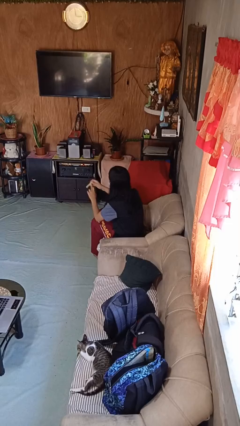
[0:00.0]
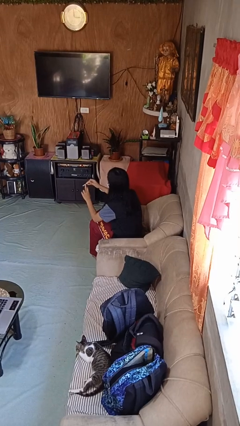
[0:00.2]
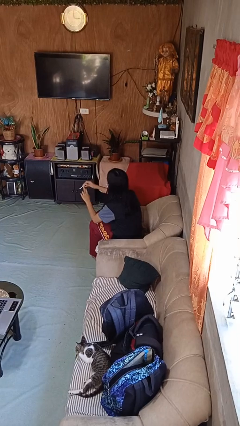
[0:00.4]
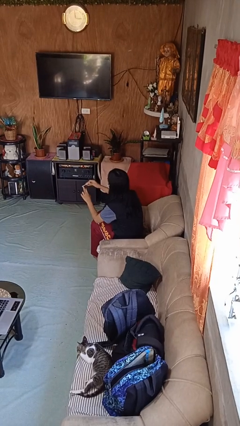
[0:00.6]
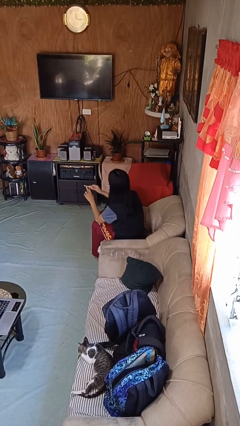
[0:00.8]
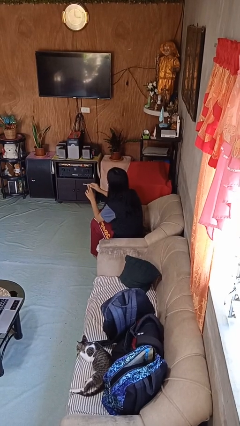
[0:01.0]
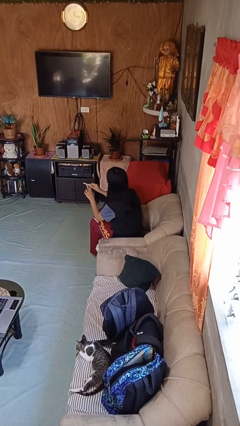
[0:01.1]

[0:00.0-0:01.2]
person files fingernails

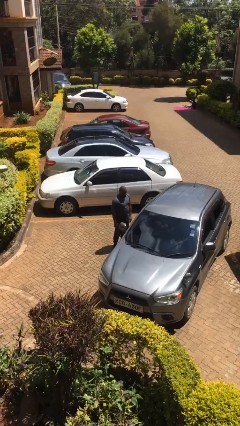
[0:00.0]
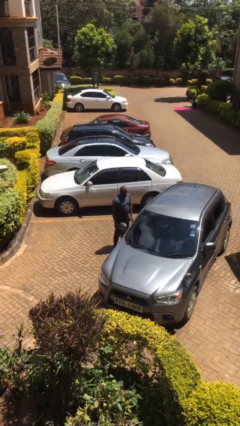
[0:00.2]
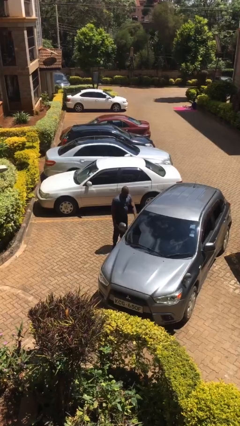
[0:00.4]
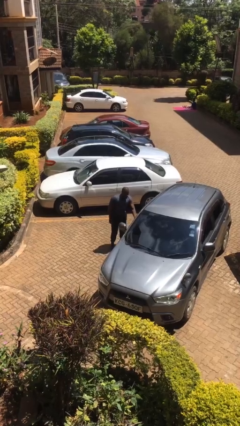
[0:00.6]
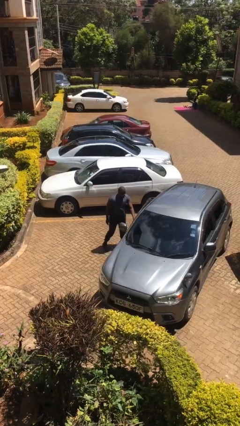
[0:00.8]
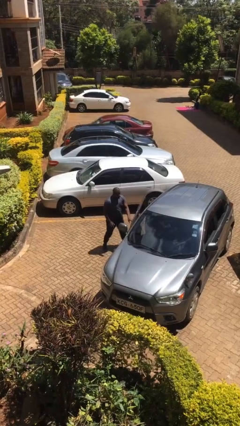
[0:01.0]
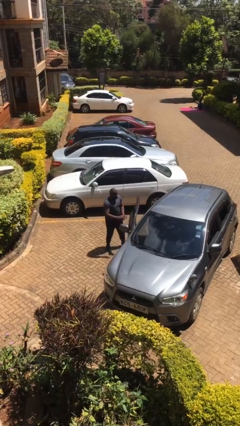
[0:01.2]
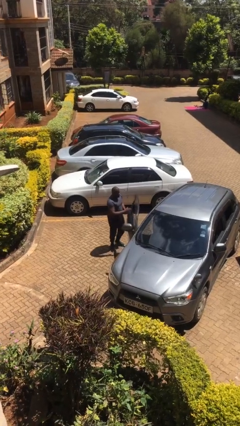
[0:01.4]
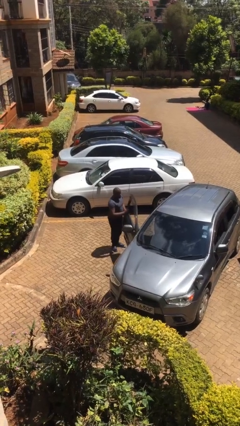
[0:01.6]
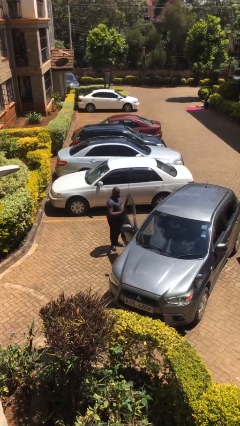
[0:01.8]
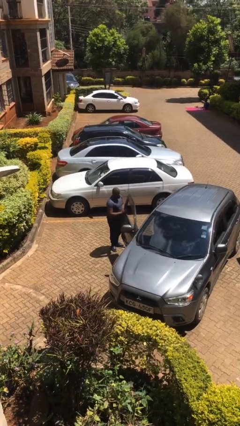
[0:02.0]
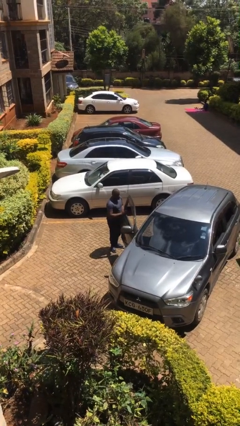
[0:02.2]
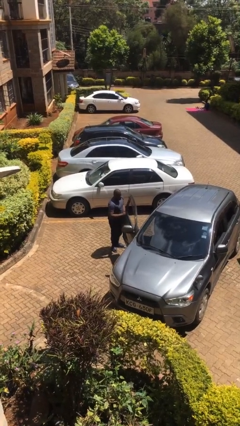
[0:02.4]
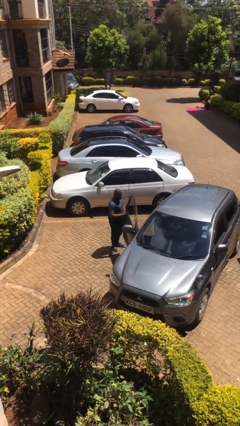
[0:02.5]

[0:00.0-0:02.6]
person opens car door

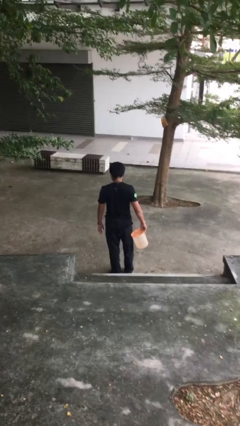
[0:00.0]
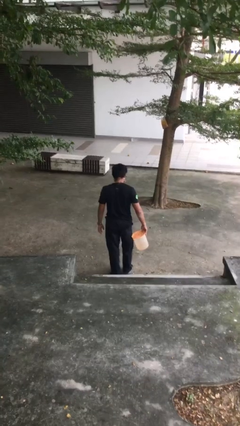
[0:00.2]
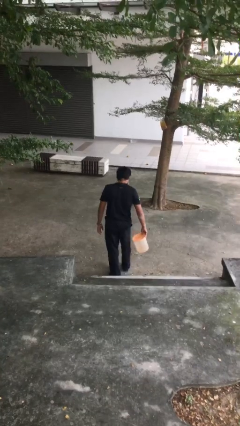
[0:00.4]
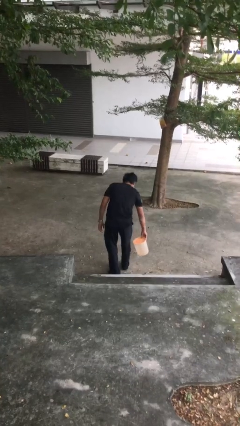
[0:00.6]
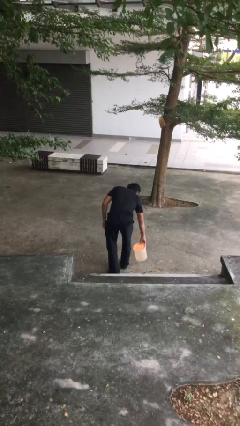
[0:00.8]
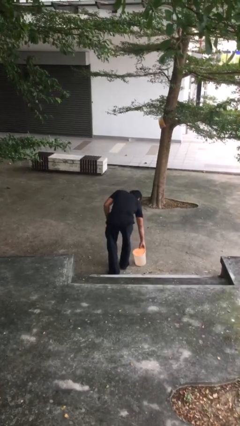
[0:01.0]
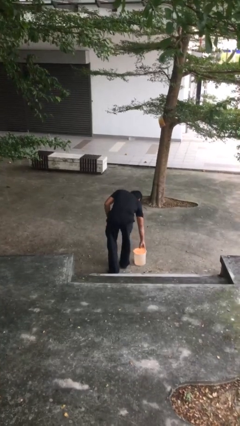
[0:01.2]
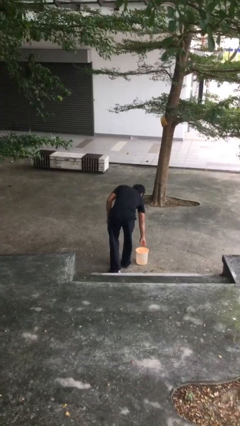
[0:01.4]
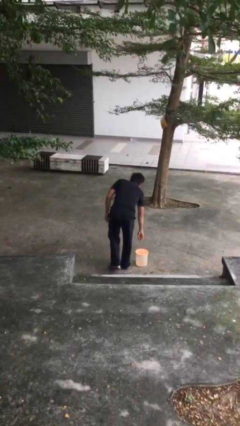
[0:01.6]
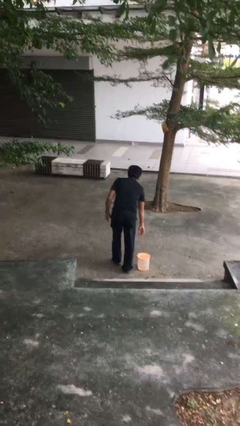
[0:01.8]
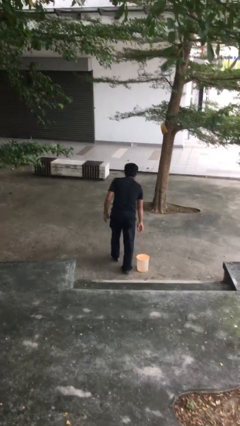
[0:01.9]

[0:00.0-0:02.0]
person puts down object on floor

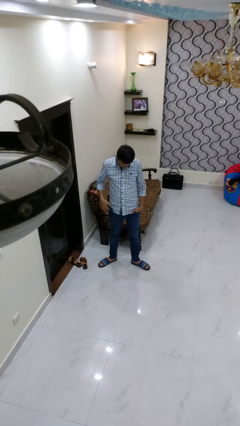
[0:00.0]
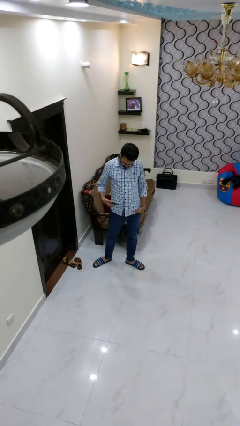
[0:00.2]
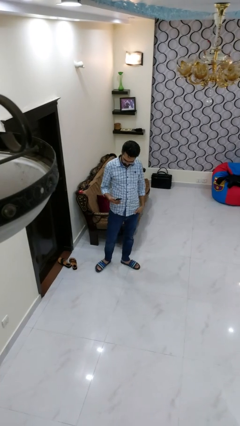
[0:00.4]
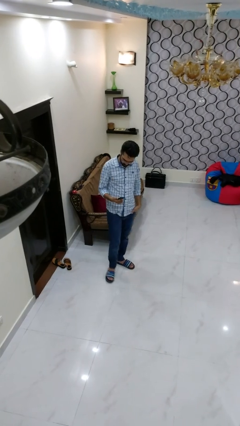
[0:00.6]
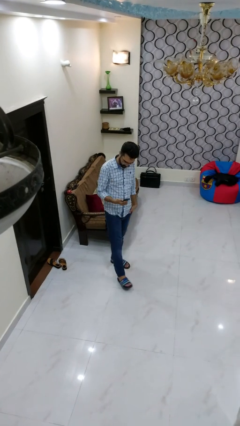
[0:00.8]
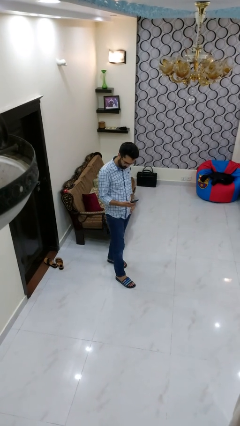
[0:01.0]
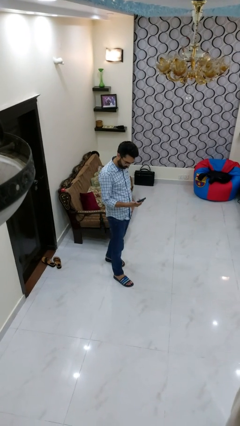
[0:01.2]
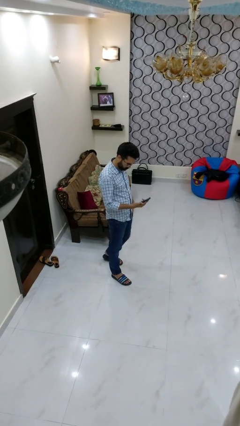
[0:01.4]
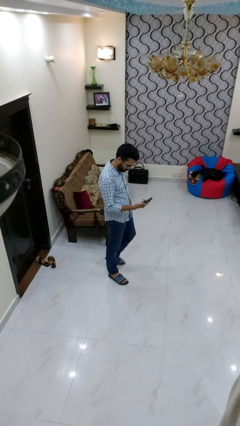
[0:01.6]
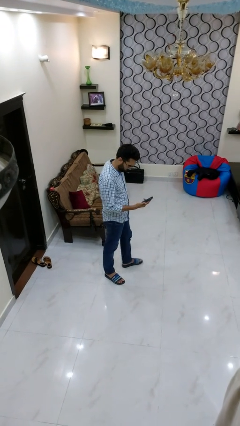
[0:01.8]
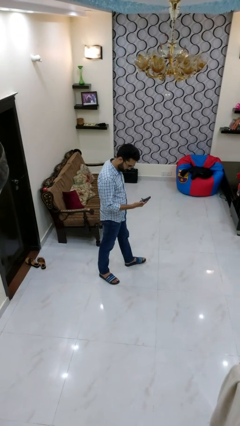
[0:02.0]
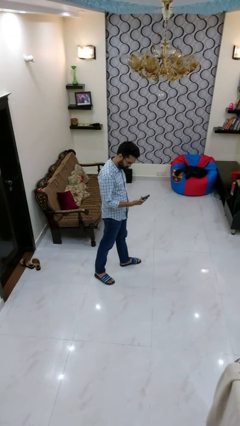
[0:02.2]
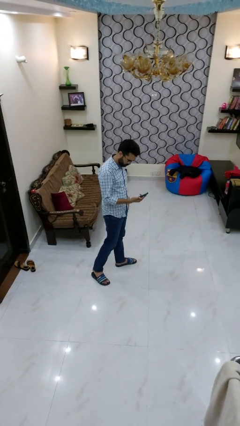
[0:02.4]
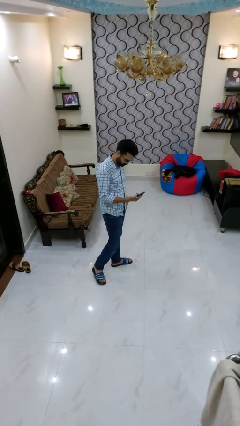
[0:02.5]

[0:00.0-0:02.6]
person takes phone from pocket

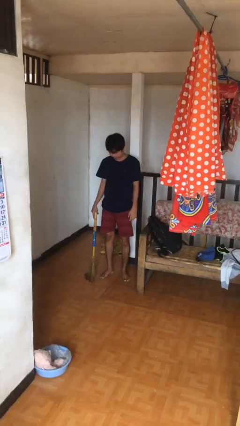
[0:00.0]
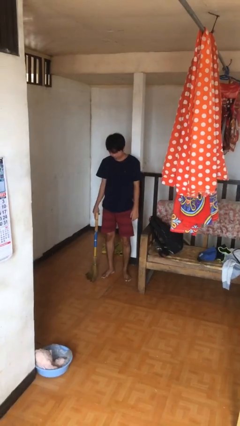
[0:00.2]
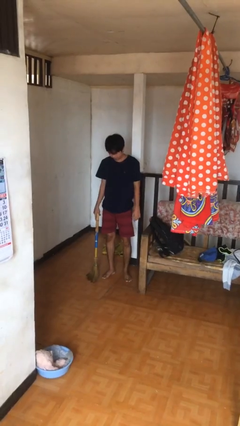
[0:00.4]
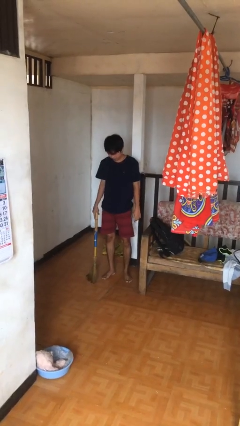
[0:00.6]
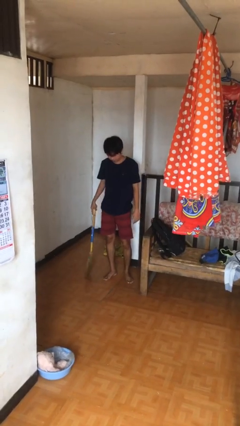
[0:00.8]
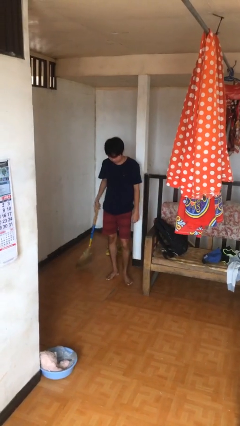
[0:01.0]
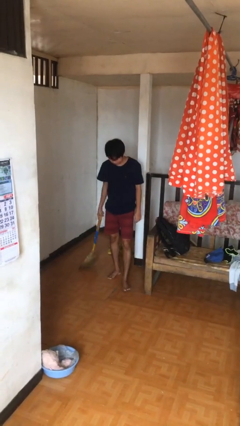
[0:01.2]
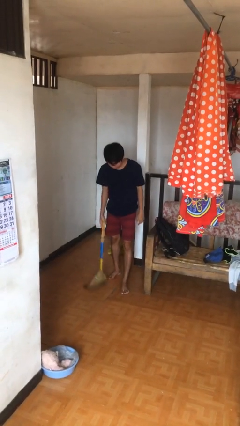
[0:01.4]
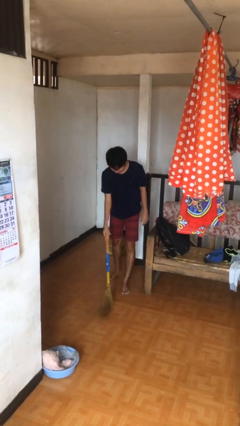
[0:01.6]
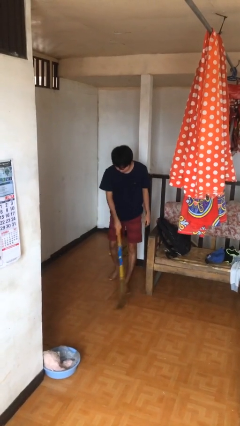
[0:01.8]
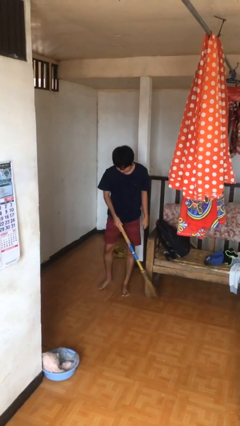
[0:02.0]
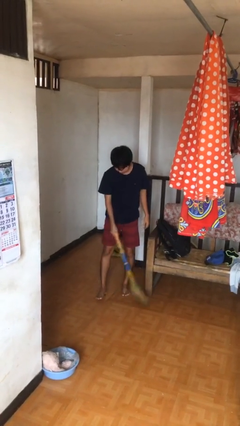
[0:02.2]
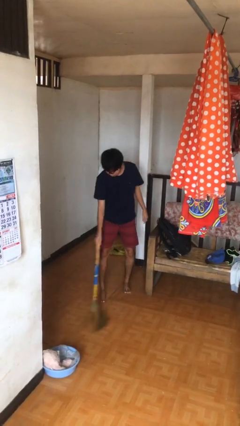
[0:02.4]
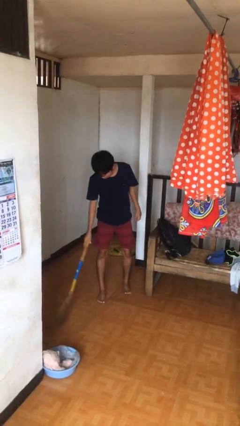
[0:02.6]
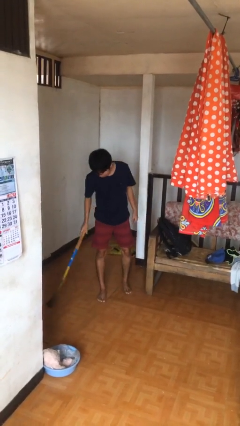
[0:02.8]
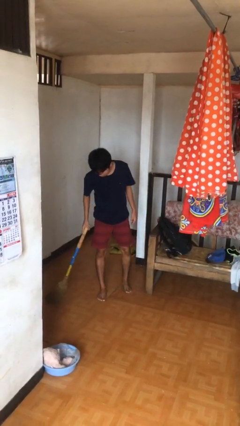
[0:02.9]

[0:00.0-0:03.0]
person sweeps floor

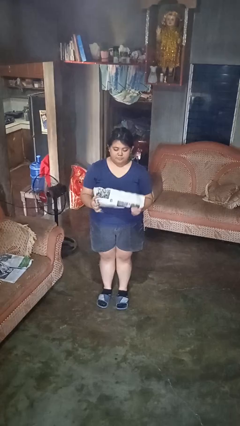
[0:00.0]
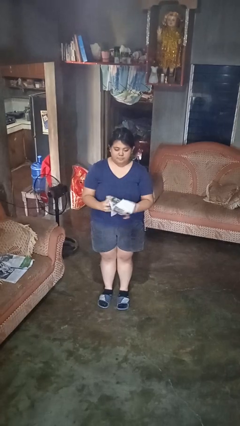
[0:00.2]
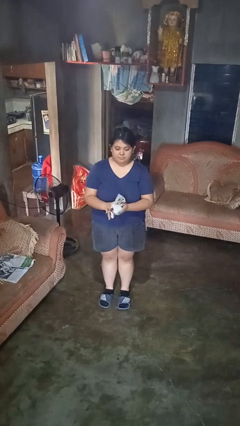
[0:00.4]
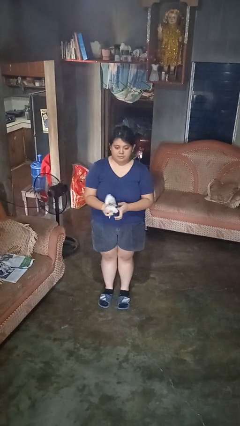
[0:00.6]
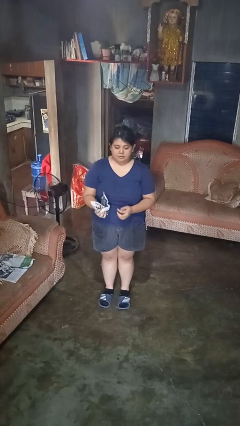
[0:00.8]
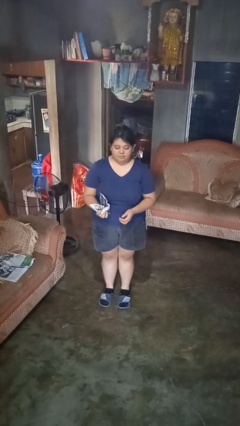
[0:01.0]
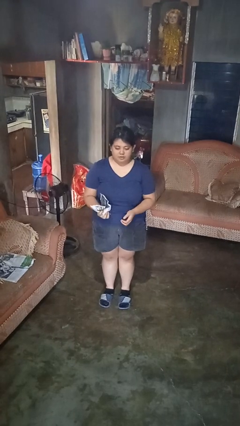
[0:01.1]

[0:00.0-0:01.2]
person crumples paper

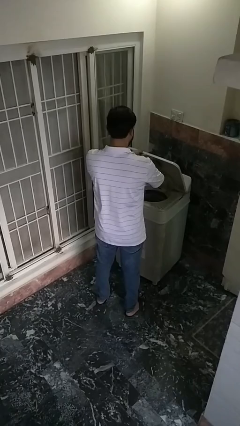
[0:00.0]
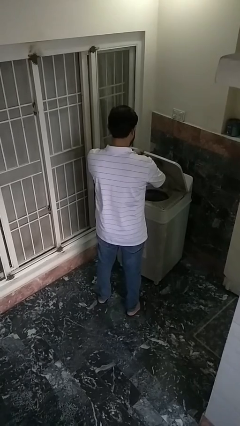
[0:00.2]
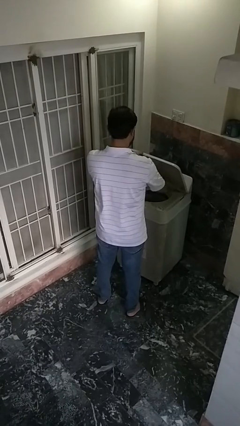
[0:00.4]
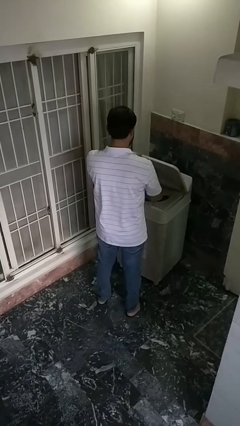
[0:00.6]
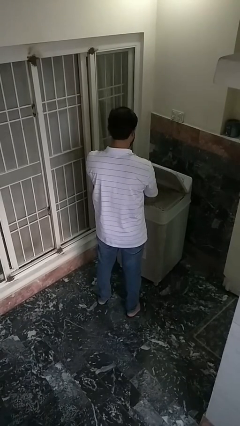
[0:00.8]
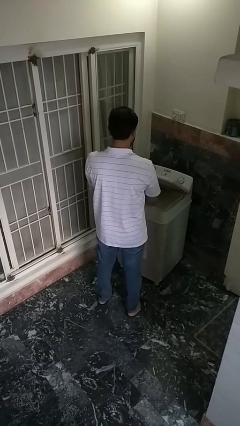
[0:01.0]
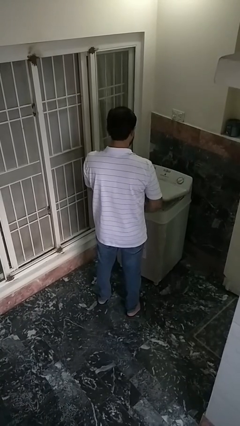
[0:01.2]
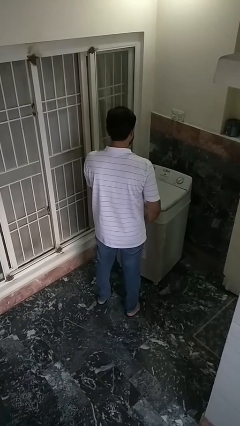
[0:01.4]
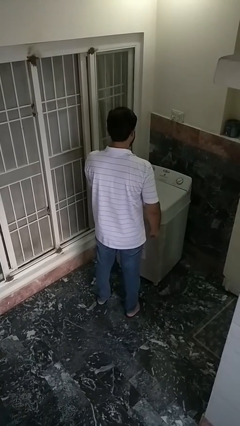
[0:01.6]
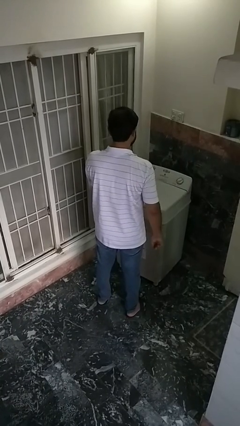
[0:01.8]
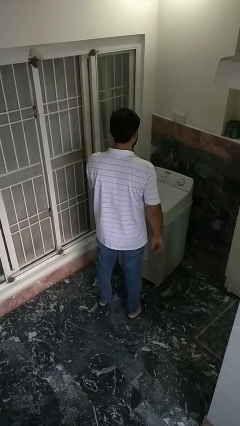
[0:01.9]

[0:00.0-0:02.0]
person closes clothes washer

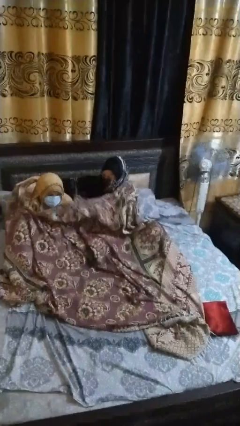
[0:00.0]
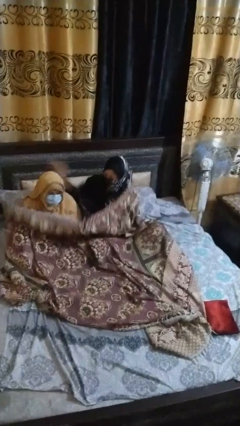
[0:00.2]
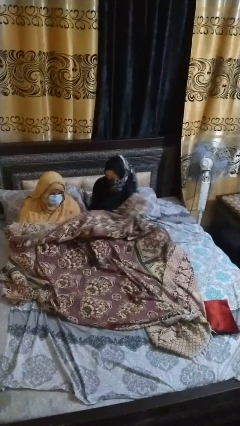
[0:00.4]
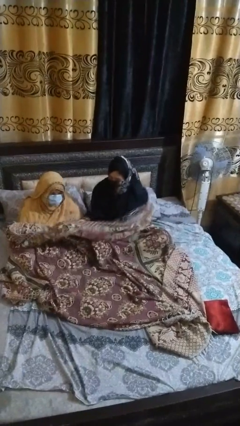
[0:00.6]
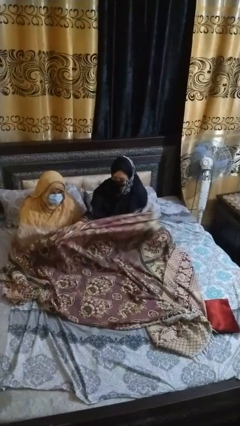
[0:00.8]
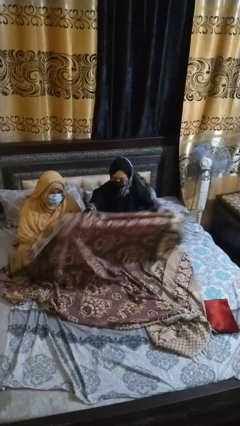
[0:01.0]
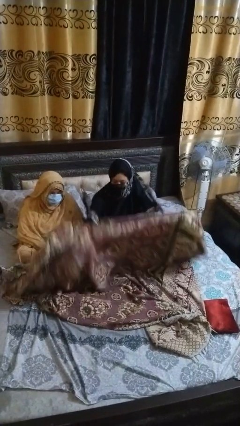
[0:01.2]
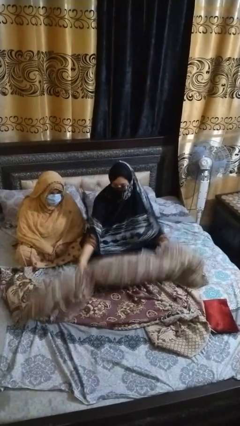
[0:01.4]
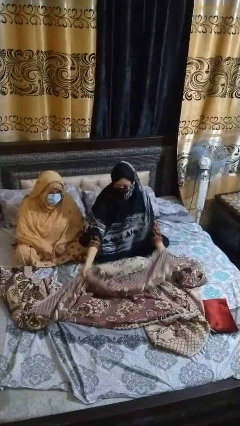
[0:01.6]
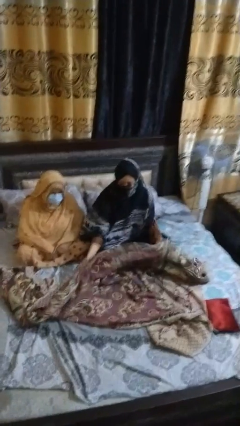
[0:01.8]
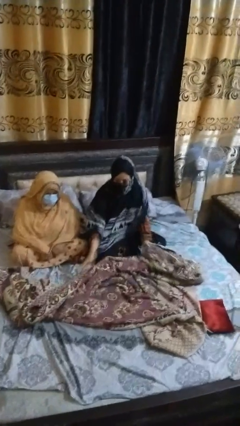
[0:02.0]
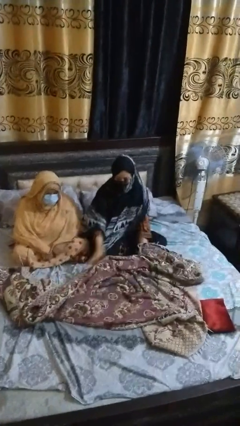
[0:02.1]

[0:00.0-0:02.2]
person uncovers friend with blanket
